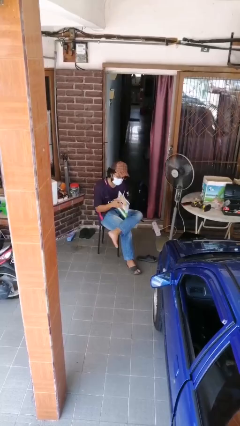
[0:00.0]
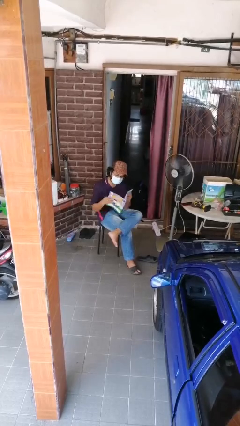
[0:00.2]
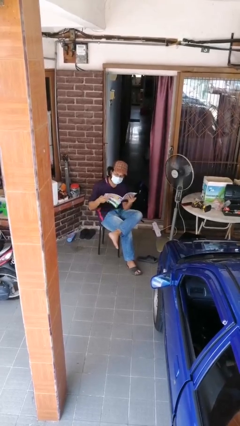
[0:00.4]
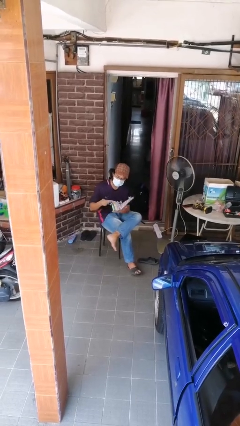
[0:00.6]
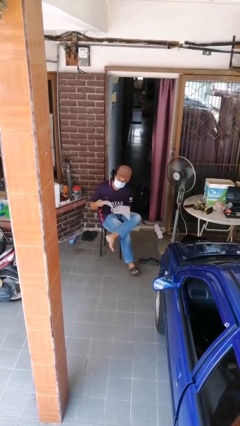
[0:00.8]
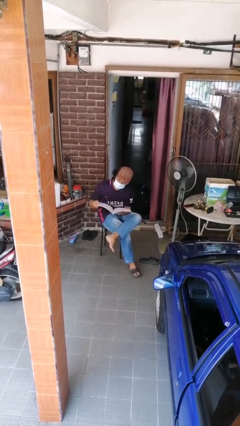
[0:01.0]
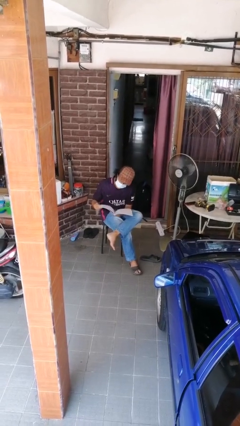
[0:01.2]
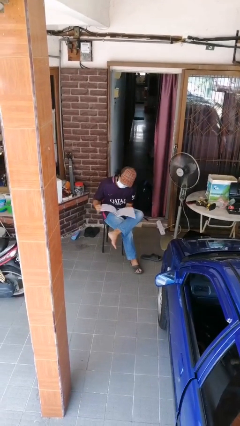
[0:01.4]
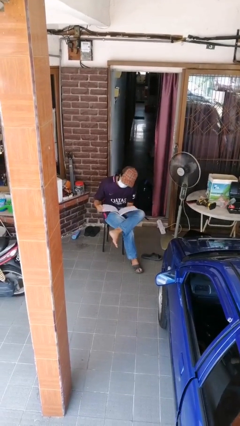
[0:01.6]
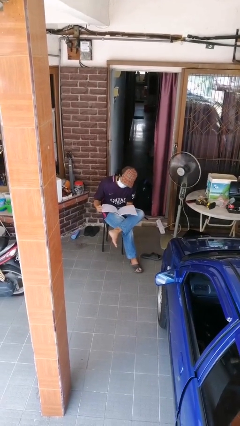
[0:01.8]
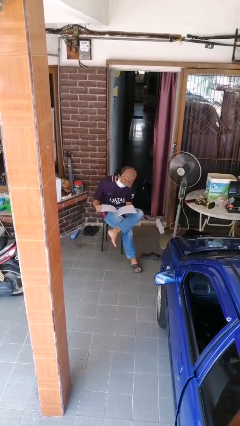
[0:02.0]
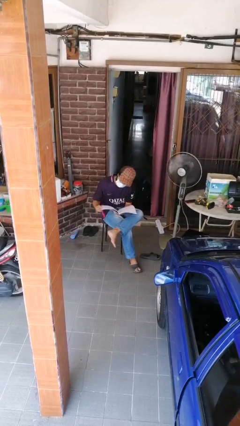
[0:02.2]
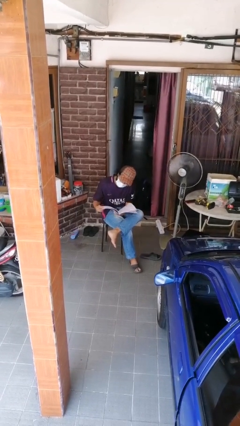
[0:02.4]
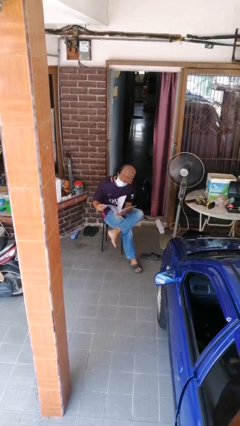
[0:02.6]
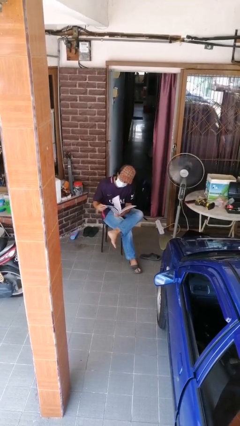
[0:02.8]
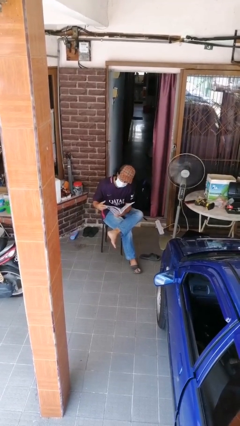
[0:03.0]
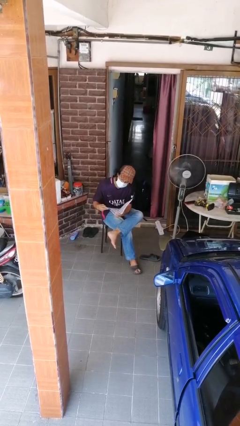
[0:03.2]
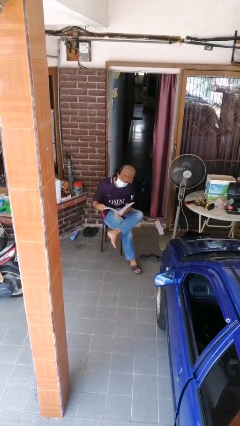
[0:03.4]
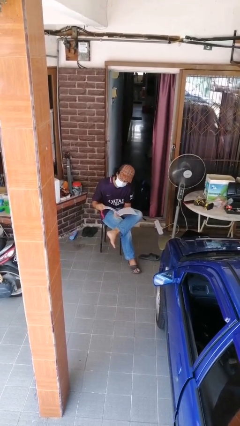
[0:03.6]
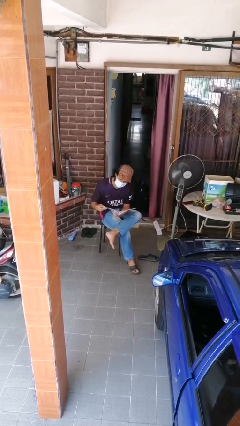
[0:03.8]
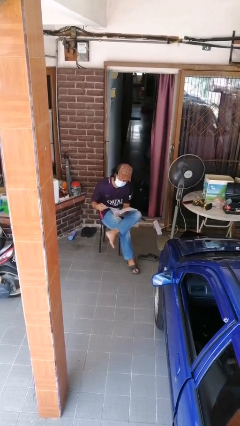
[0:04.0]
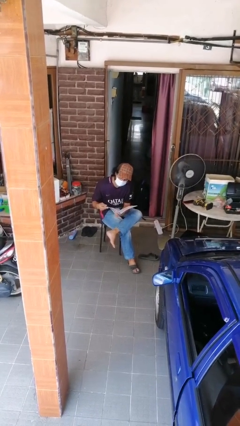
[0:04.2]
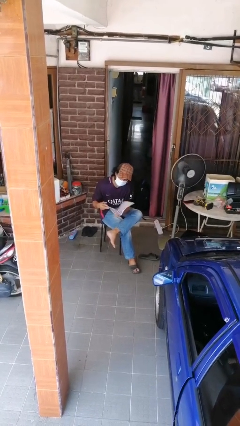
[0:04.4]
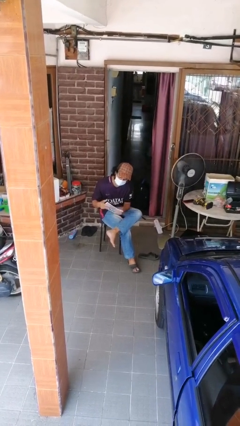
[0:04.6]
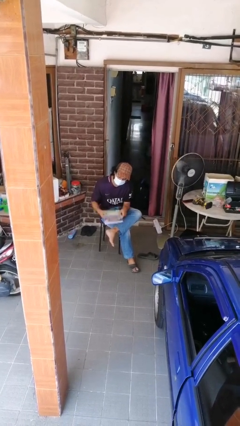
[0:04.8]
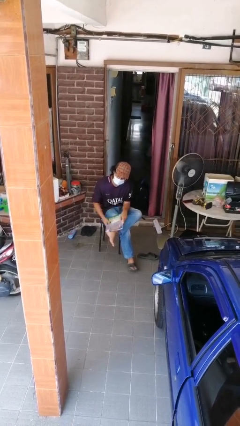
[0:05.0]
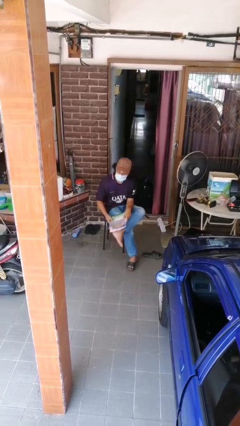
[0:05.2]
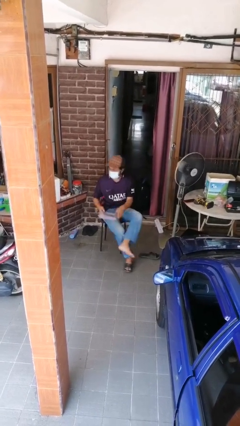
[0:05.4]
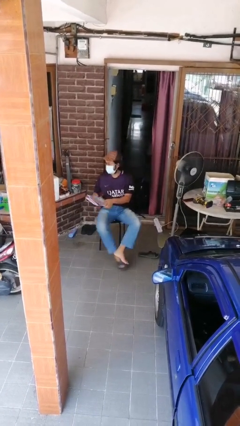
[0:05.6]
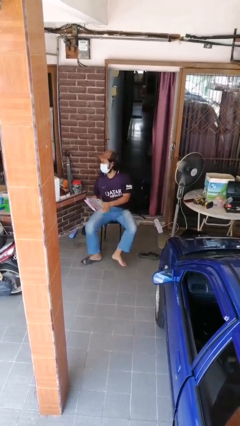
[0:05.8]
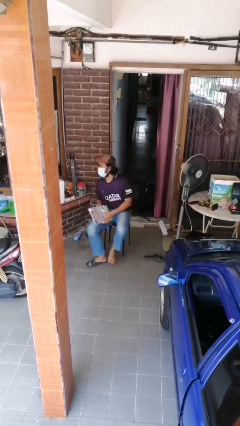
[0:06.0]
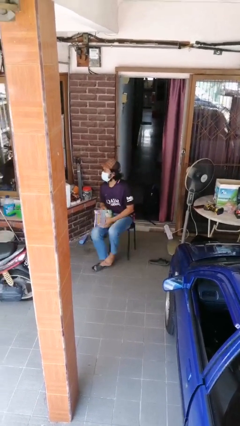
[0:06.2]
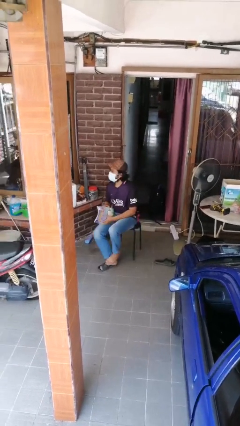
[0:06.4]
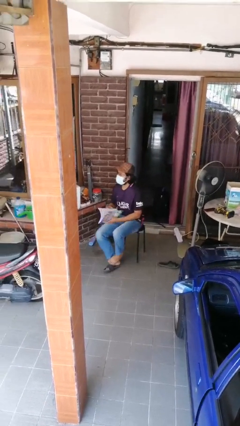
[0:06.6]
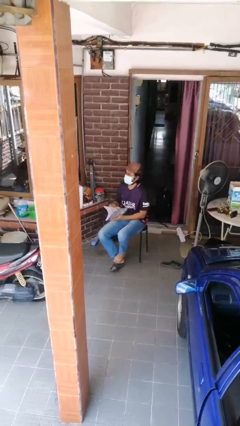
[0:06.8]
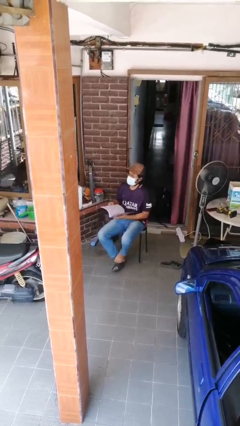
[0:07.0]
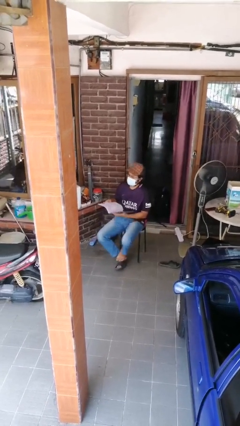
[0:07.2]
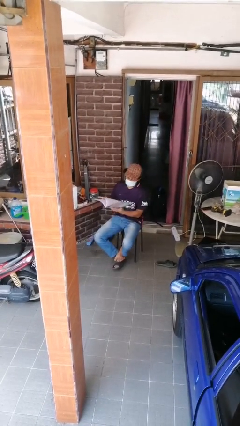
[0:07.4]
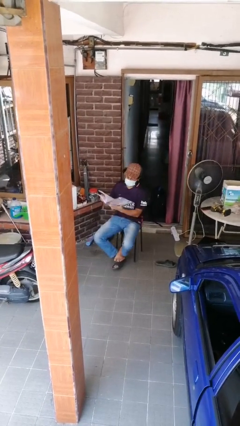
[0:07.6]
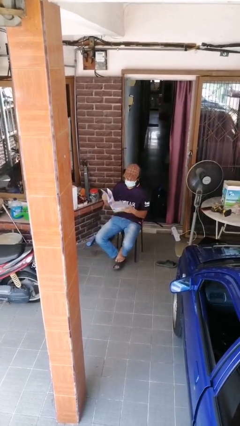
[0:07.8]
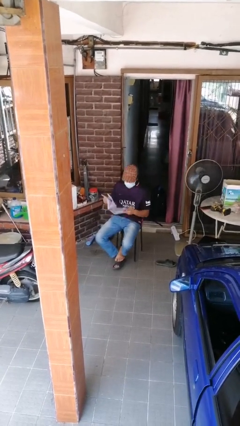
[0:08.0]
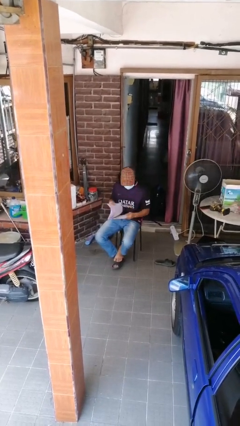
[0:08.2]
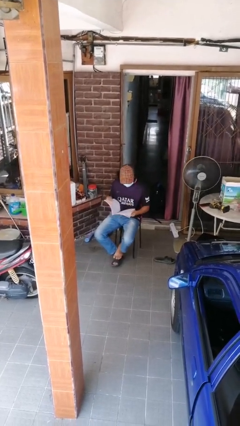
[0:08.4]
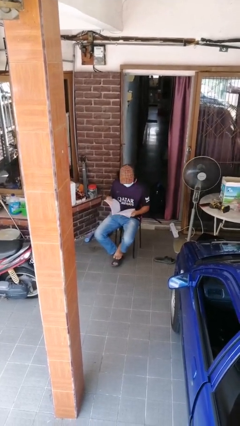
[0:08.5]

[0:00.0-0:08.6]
person reads document

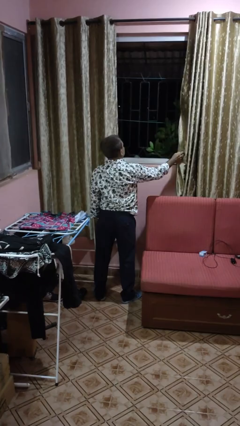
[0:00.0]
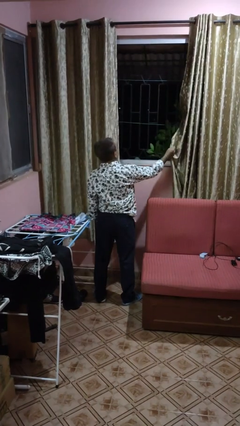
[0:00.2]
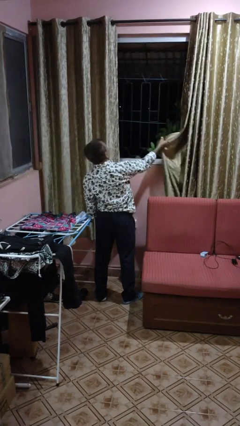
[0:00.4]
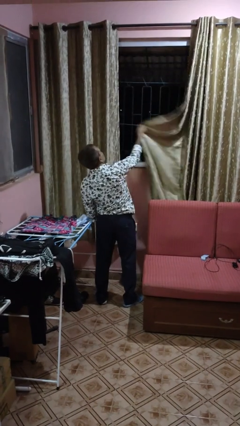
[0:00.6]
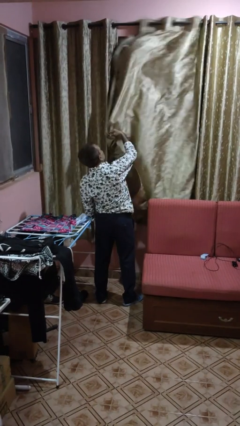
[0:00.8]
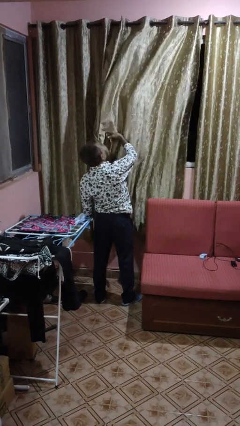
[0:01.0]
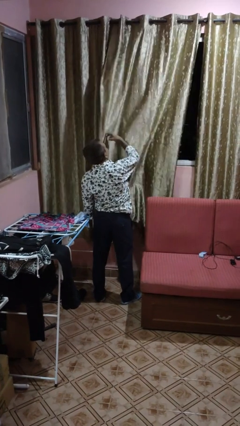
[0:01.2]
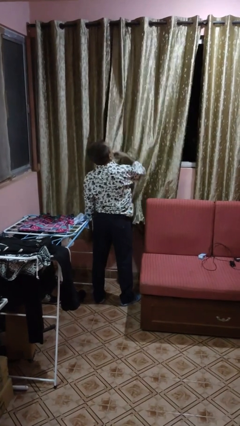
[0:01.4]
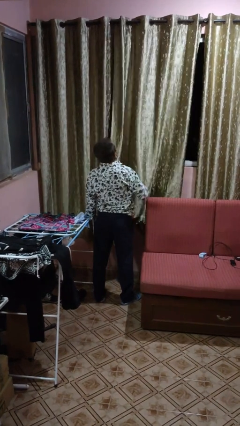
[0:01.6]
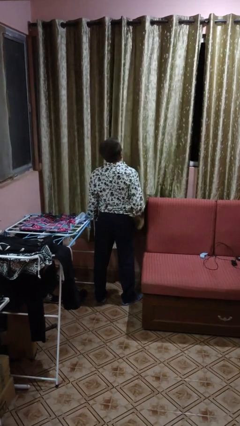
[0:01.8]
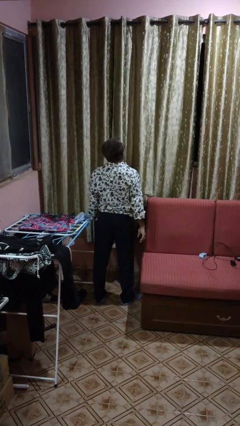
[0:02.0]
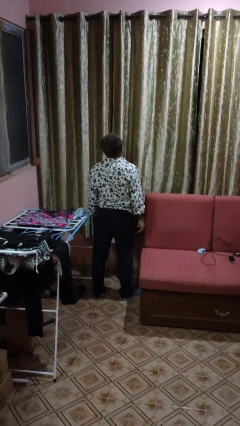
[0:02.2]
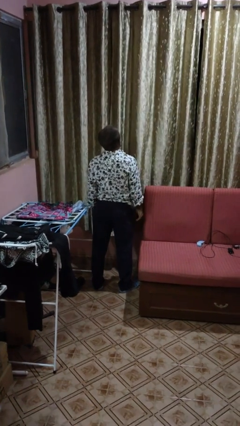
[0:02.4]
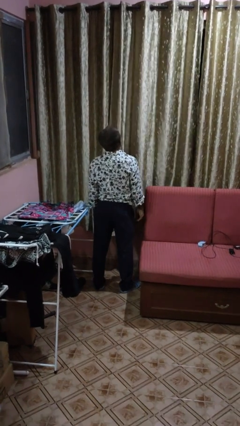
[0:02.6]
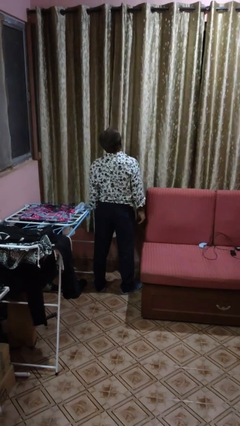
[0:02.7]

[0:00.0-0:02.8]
person closes curtains

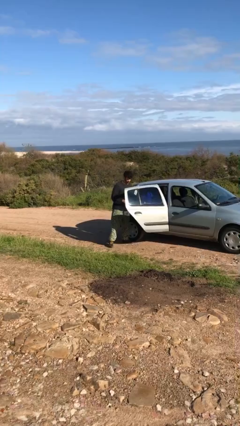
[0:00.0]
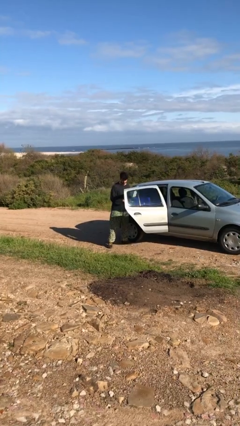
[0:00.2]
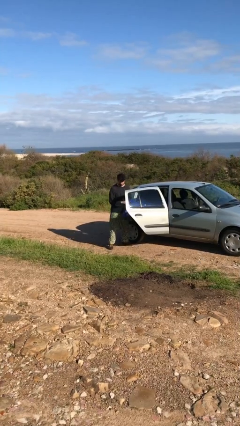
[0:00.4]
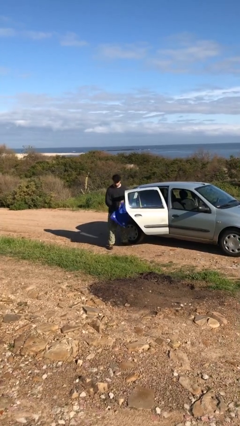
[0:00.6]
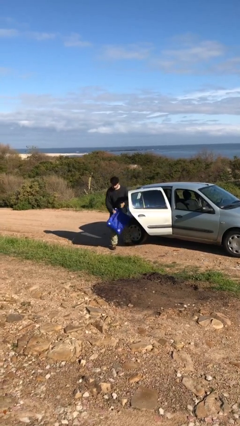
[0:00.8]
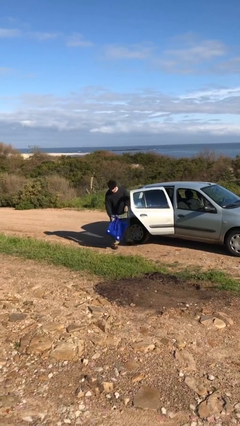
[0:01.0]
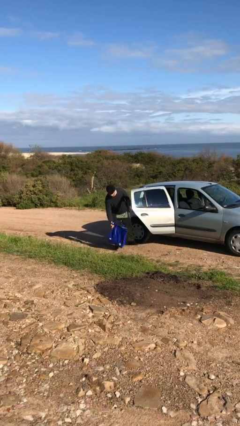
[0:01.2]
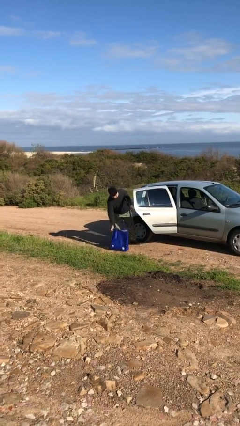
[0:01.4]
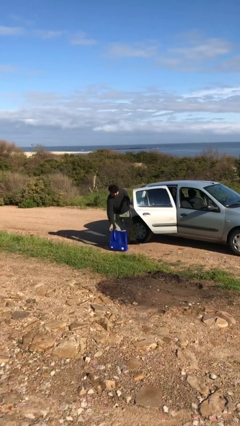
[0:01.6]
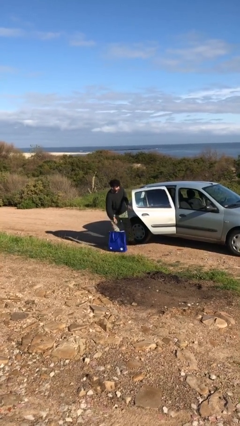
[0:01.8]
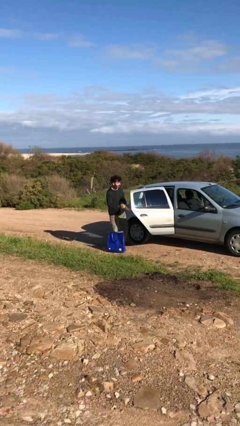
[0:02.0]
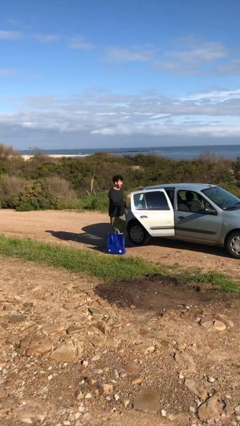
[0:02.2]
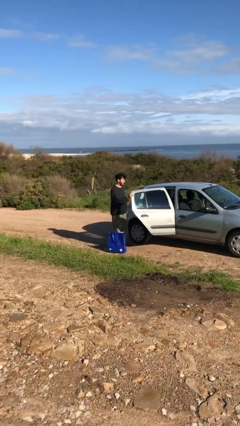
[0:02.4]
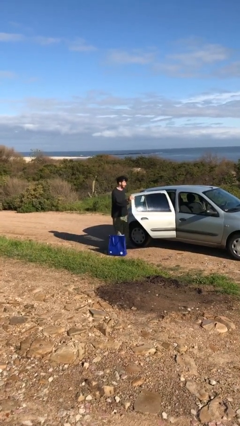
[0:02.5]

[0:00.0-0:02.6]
person unloads car

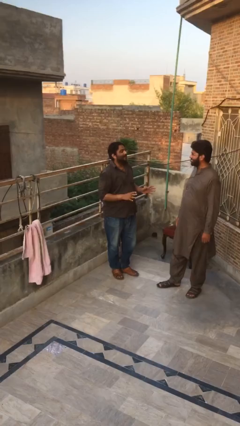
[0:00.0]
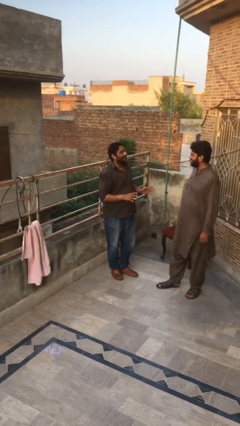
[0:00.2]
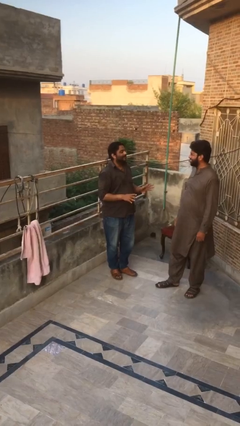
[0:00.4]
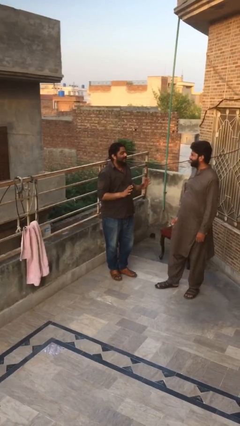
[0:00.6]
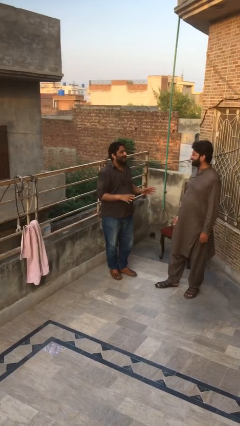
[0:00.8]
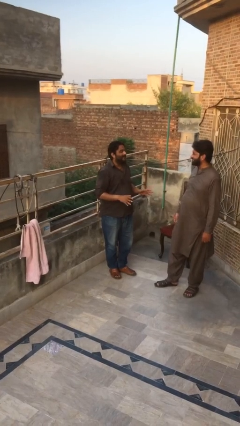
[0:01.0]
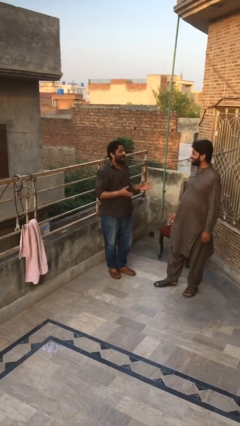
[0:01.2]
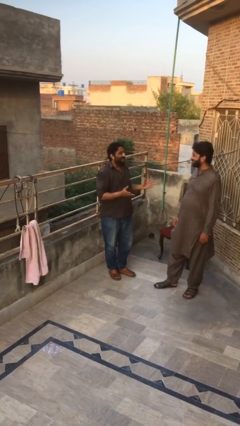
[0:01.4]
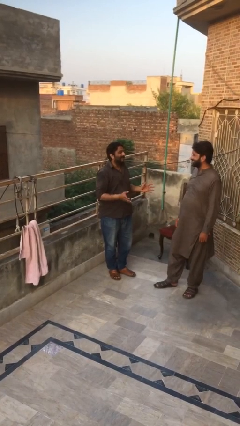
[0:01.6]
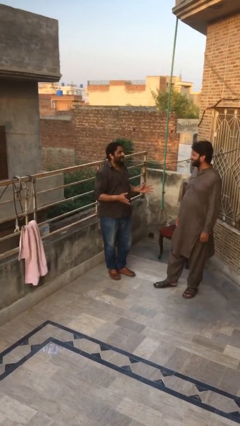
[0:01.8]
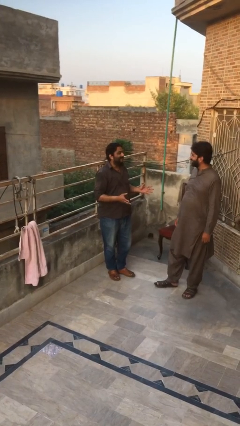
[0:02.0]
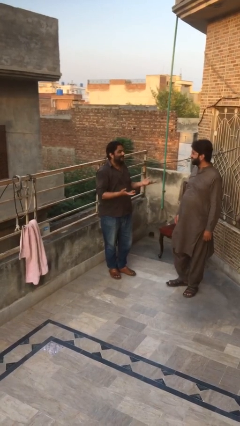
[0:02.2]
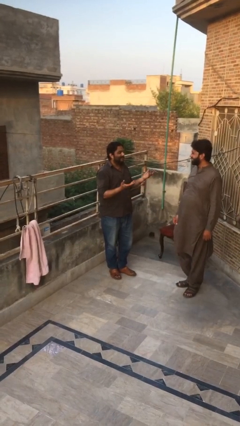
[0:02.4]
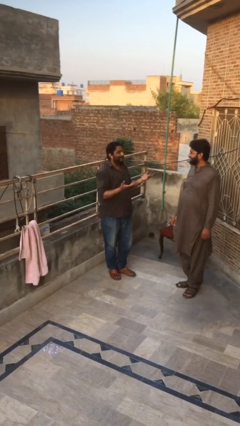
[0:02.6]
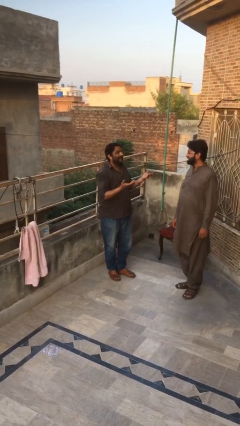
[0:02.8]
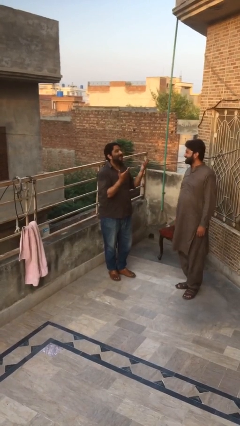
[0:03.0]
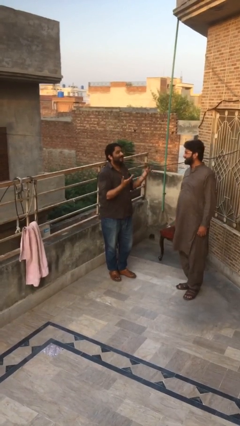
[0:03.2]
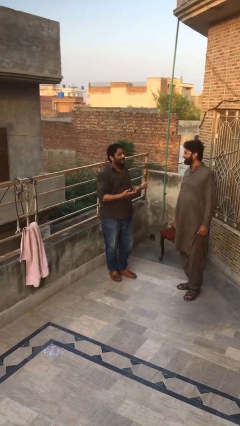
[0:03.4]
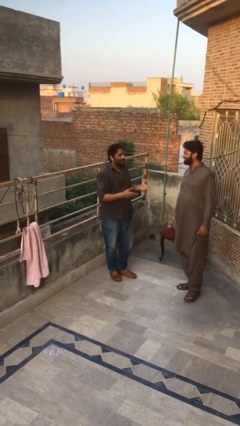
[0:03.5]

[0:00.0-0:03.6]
person talks to person

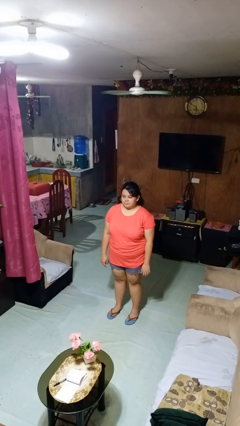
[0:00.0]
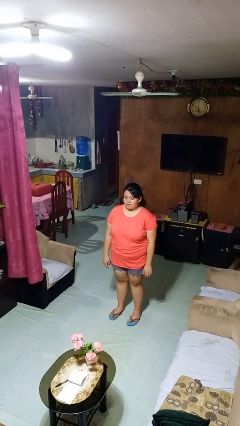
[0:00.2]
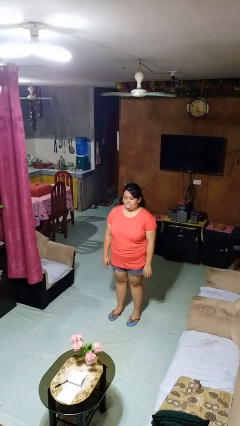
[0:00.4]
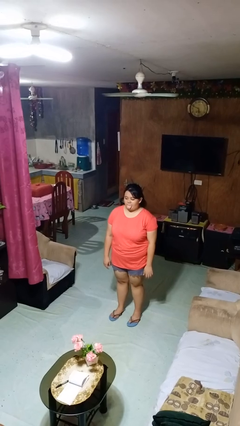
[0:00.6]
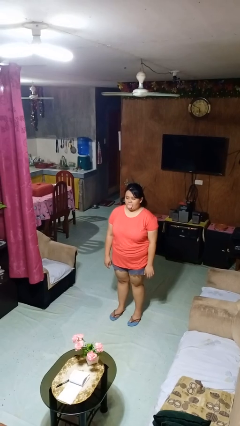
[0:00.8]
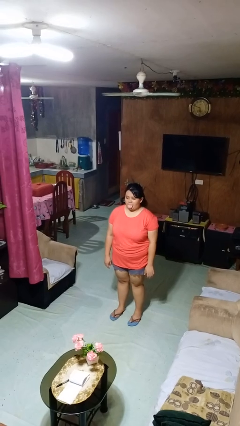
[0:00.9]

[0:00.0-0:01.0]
person sticks out tongue
